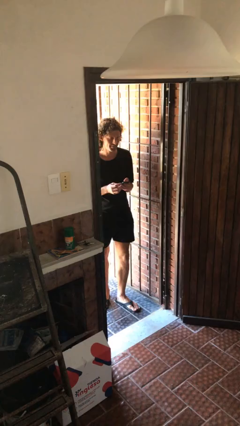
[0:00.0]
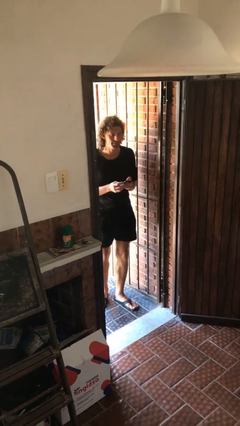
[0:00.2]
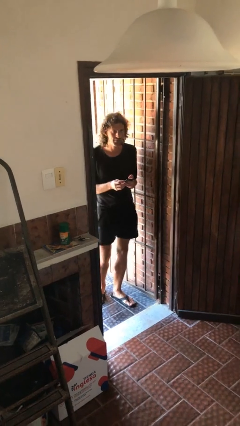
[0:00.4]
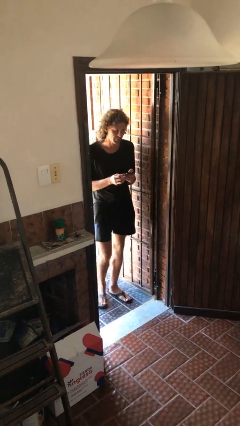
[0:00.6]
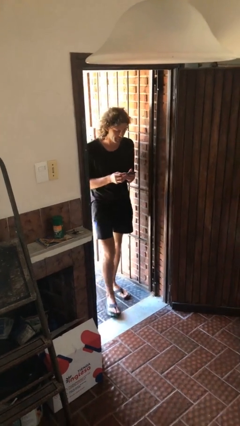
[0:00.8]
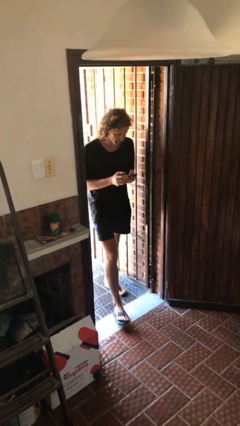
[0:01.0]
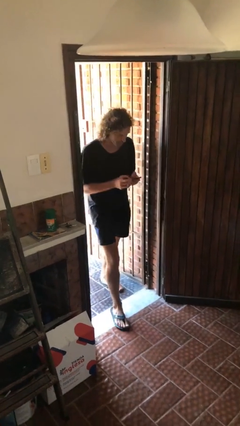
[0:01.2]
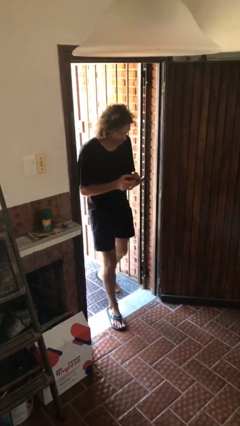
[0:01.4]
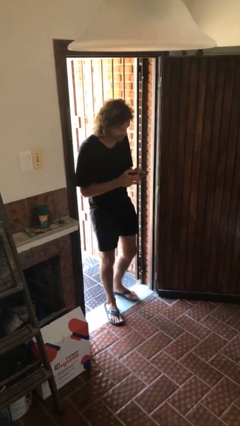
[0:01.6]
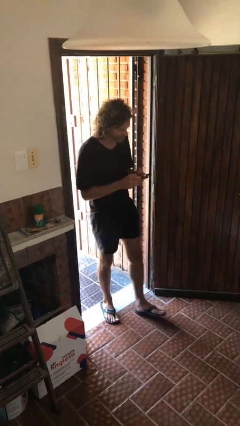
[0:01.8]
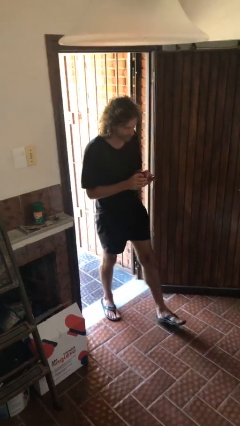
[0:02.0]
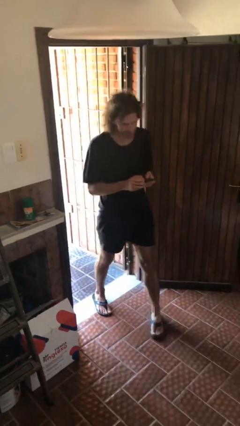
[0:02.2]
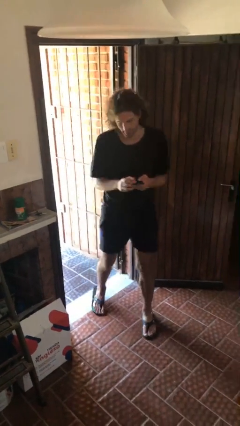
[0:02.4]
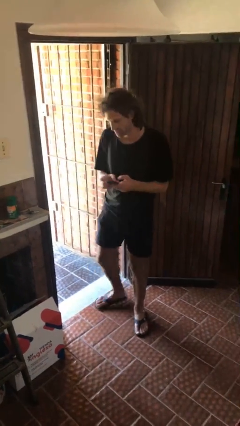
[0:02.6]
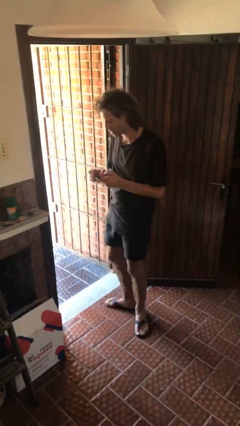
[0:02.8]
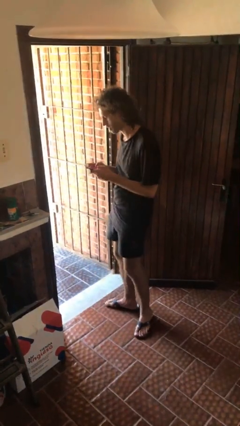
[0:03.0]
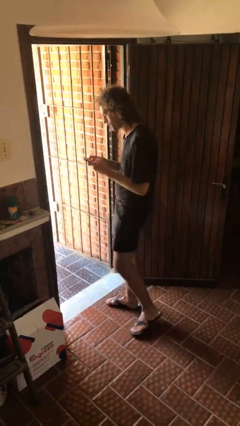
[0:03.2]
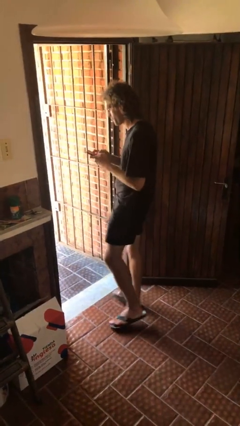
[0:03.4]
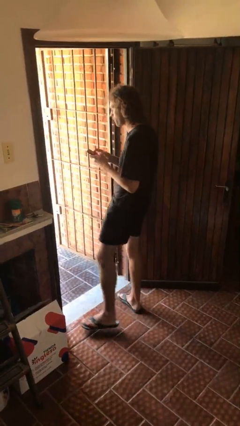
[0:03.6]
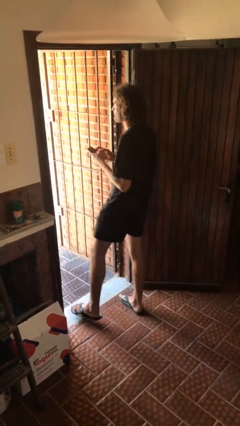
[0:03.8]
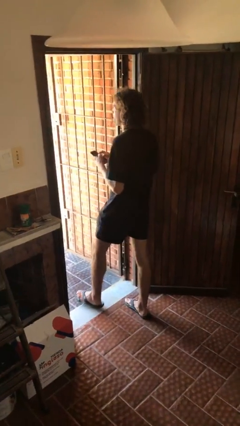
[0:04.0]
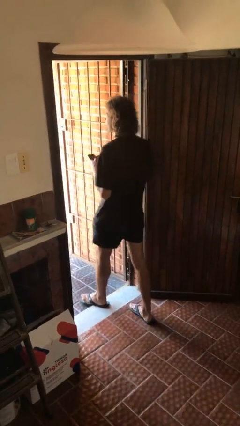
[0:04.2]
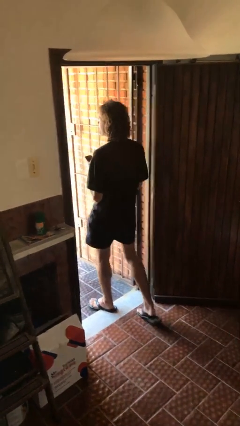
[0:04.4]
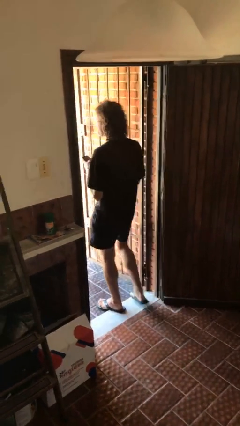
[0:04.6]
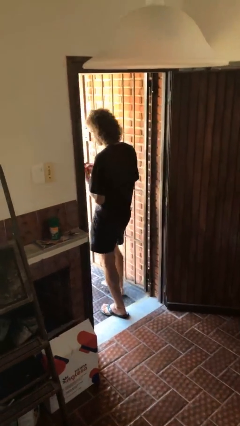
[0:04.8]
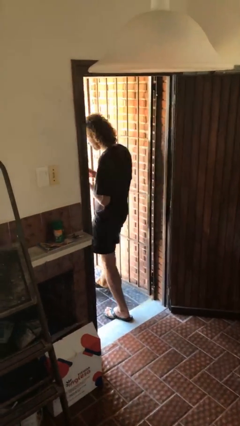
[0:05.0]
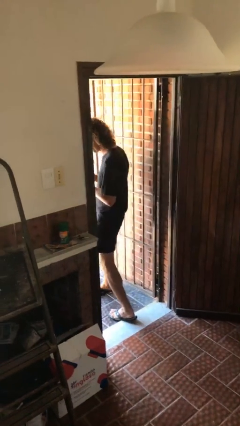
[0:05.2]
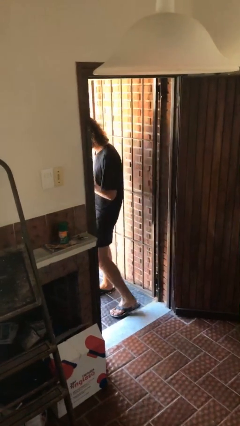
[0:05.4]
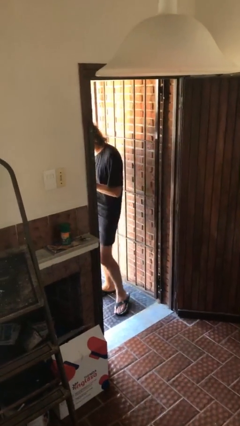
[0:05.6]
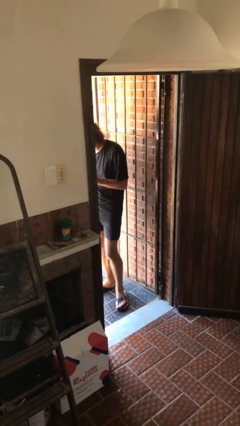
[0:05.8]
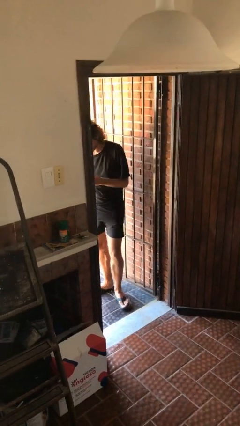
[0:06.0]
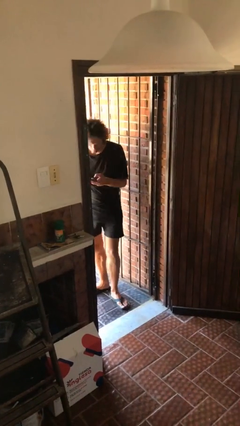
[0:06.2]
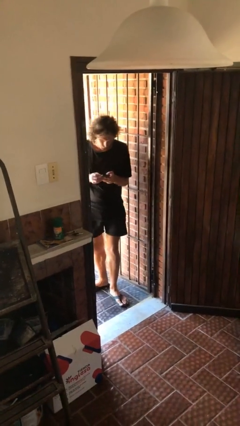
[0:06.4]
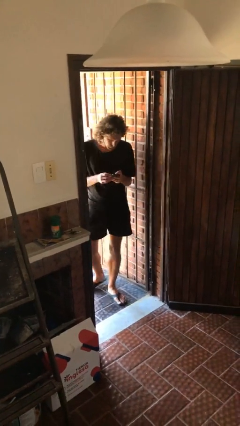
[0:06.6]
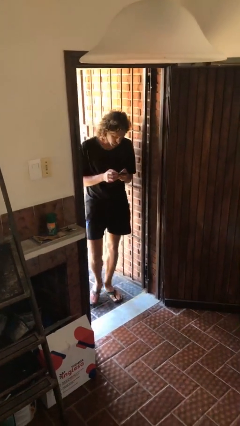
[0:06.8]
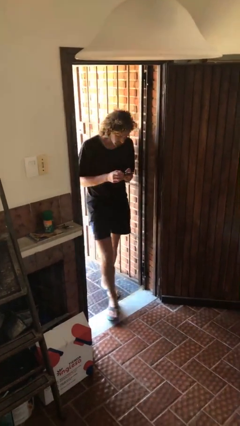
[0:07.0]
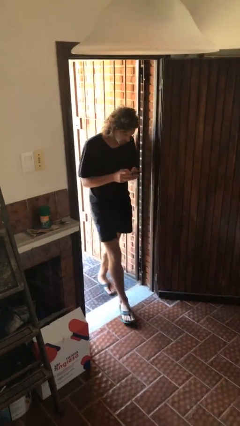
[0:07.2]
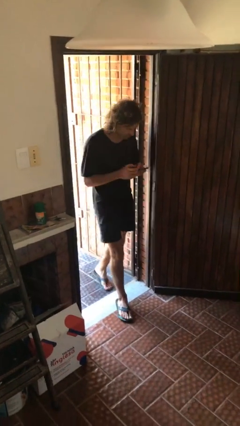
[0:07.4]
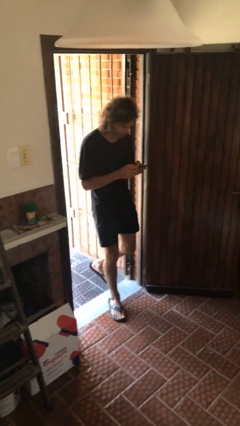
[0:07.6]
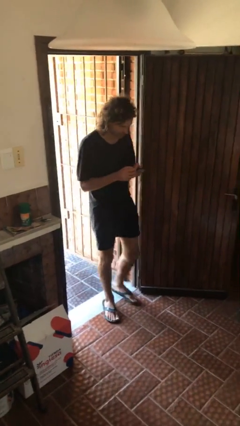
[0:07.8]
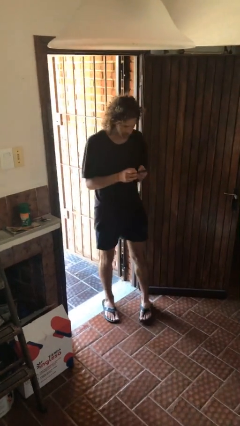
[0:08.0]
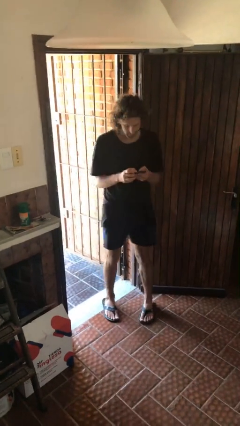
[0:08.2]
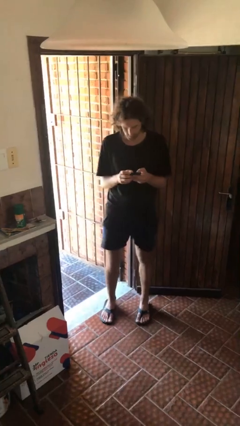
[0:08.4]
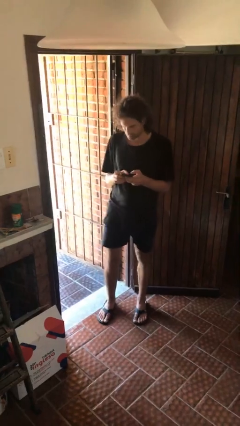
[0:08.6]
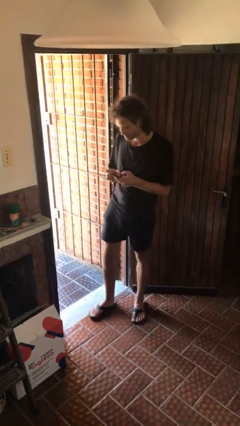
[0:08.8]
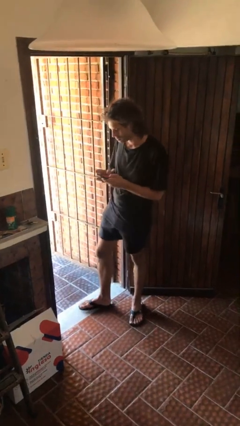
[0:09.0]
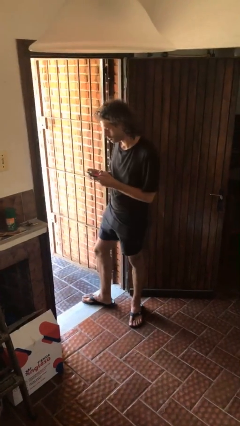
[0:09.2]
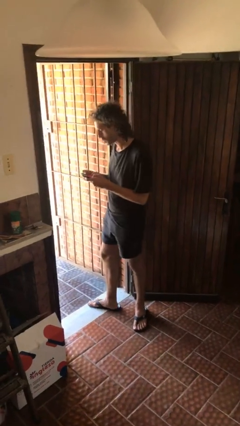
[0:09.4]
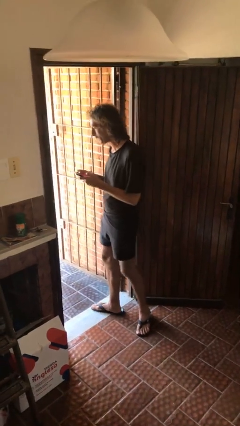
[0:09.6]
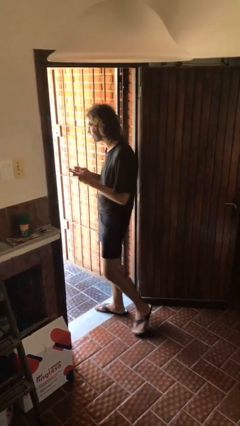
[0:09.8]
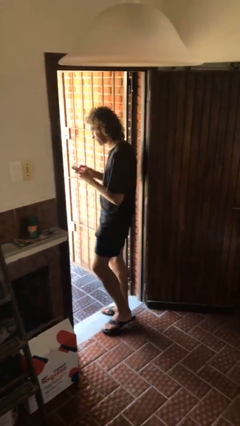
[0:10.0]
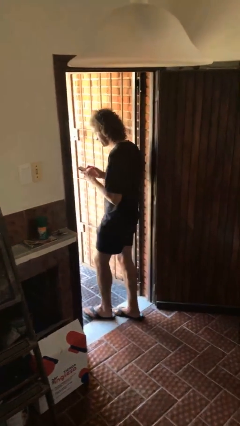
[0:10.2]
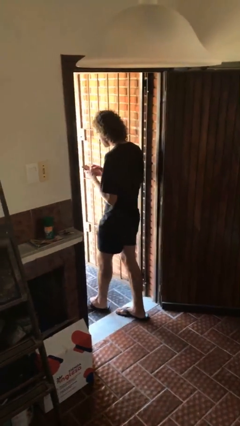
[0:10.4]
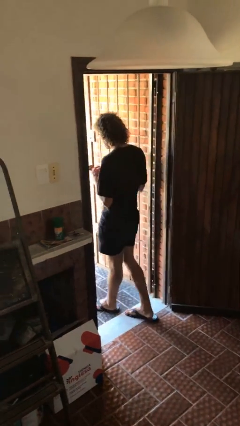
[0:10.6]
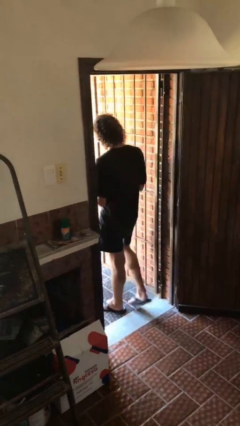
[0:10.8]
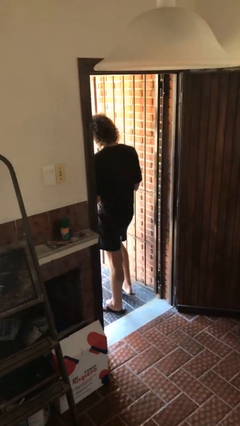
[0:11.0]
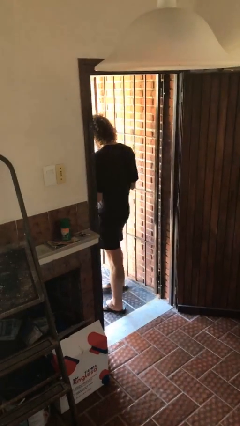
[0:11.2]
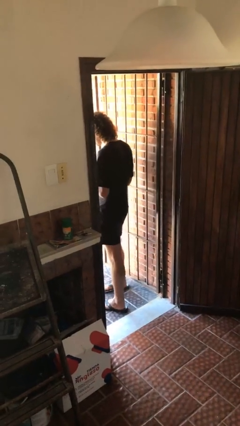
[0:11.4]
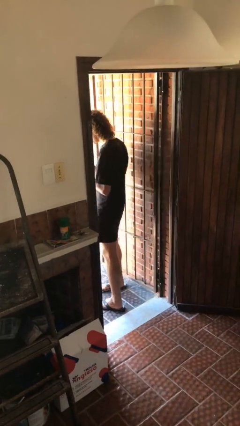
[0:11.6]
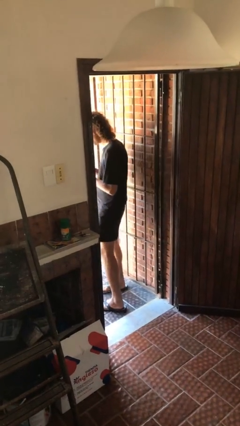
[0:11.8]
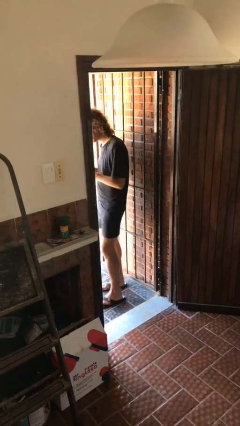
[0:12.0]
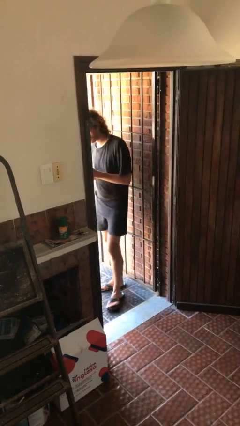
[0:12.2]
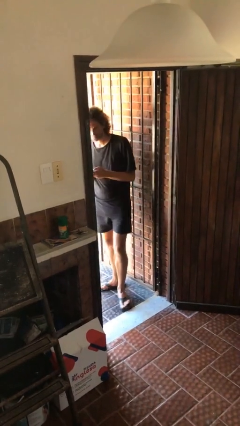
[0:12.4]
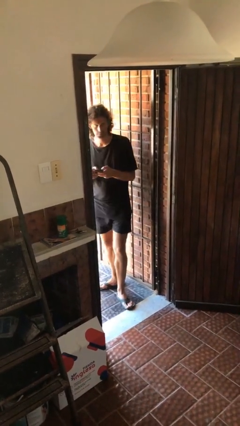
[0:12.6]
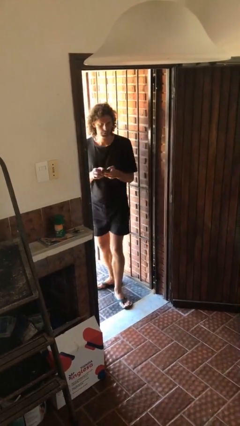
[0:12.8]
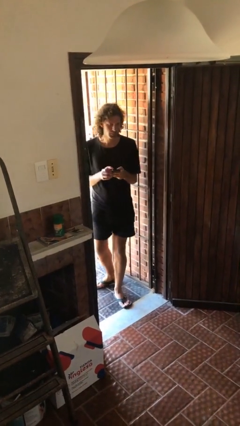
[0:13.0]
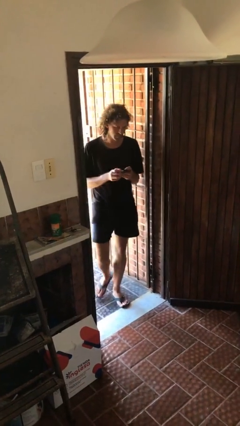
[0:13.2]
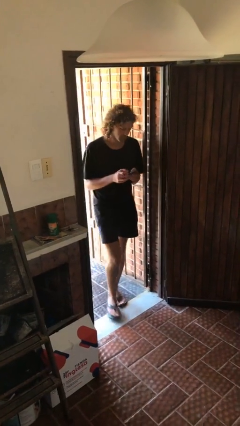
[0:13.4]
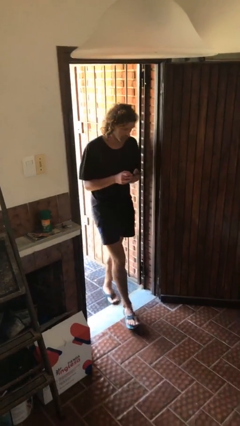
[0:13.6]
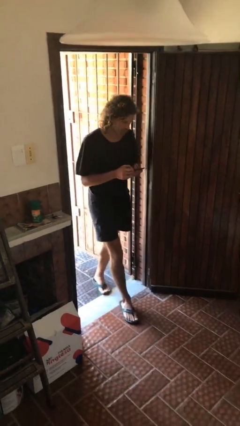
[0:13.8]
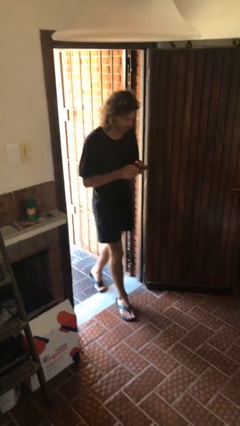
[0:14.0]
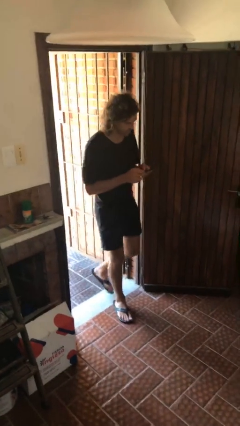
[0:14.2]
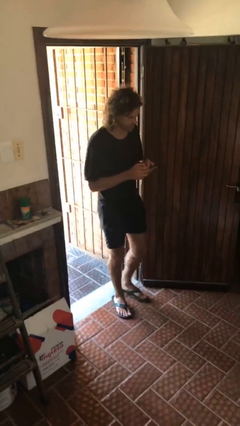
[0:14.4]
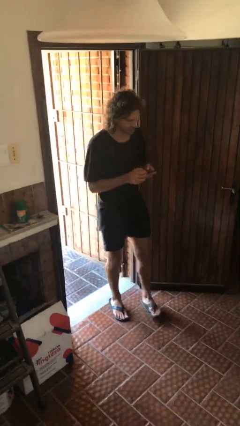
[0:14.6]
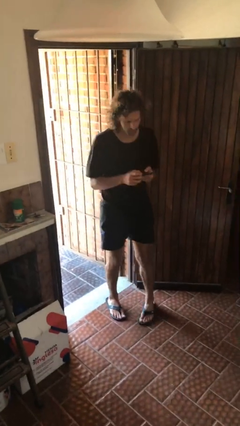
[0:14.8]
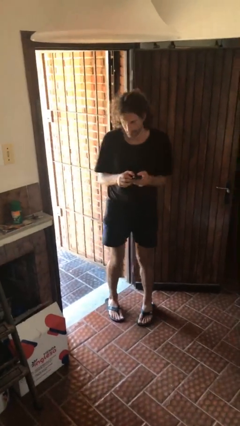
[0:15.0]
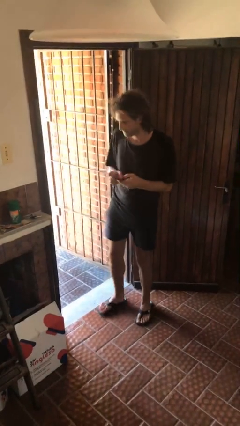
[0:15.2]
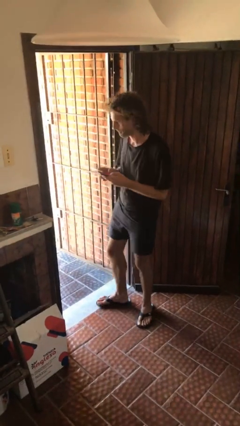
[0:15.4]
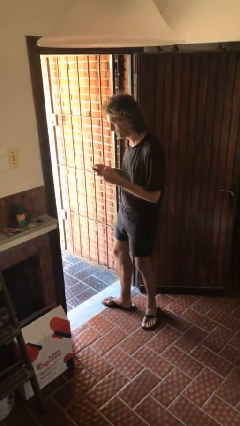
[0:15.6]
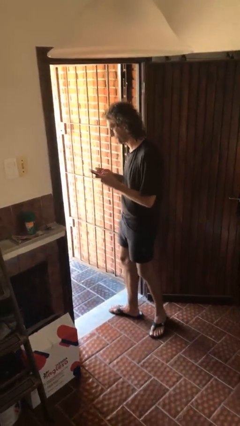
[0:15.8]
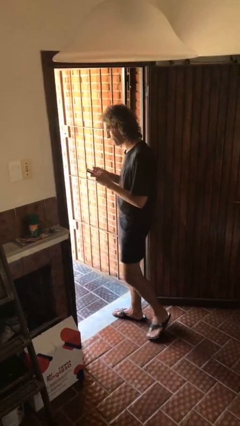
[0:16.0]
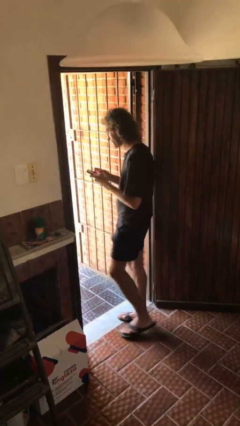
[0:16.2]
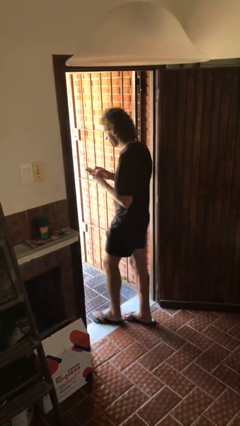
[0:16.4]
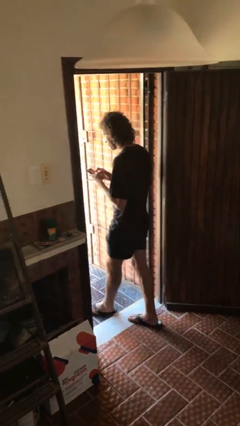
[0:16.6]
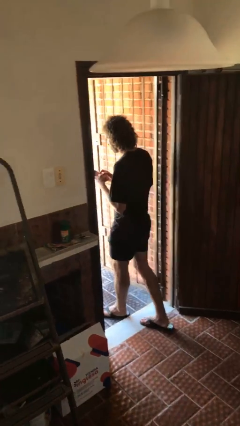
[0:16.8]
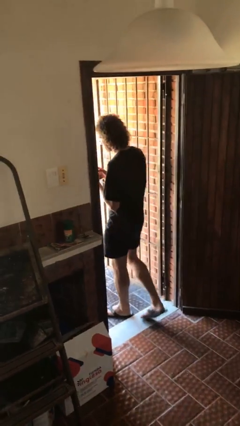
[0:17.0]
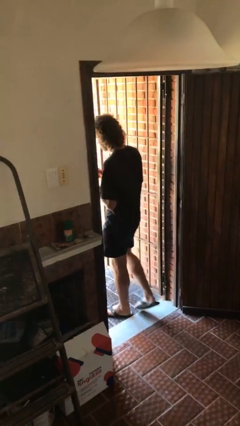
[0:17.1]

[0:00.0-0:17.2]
person texts on phone

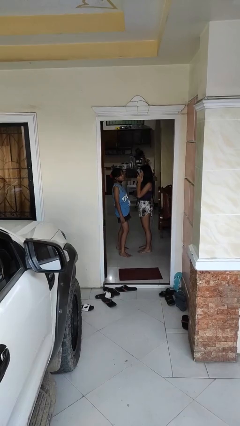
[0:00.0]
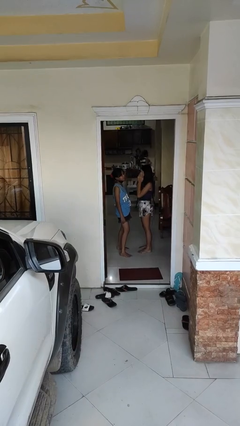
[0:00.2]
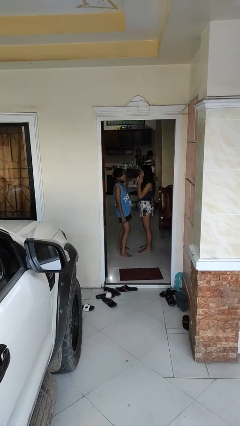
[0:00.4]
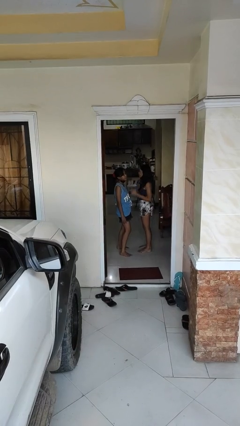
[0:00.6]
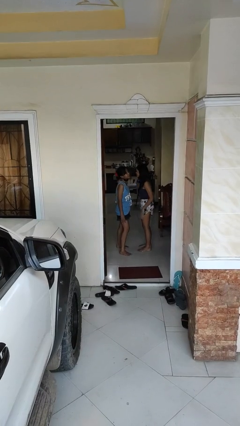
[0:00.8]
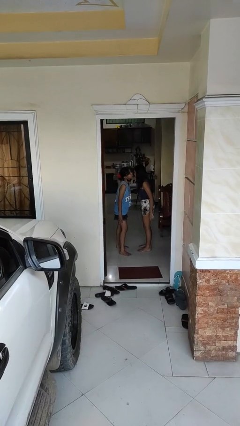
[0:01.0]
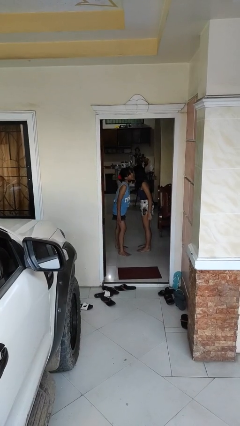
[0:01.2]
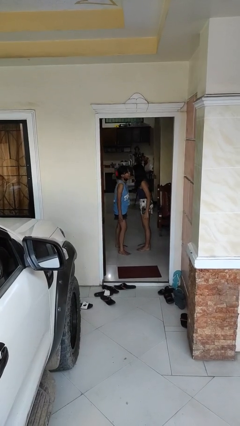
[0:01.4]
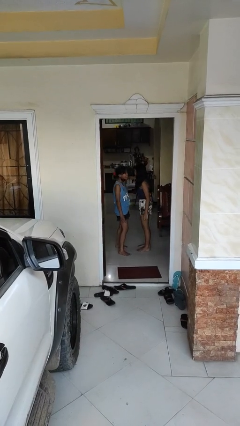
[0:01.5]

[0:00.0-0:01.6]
person kisses cheek of person
